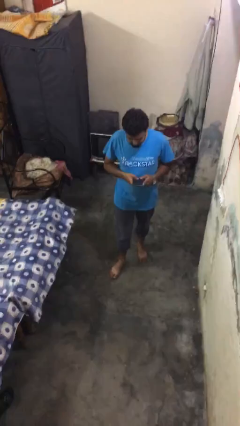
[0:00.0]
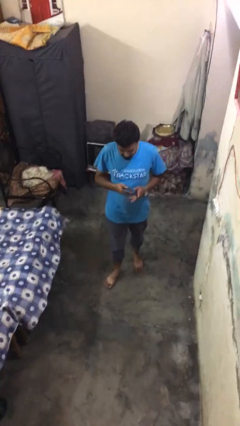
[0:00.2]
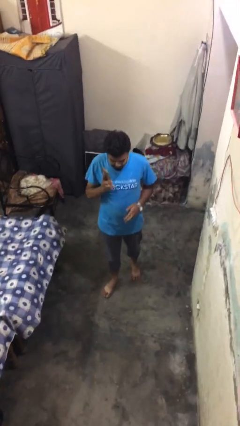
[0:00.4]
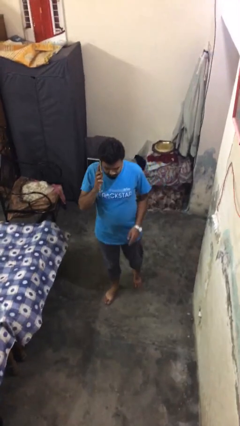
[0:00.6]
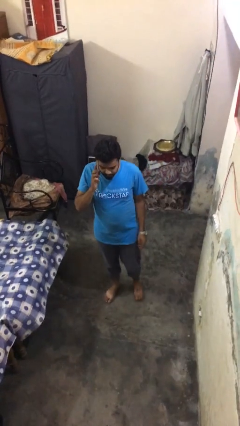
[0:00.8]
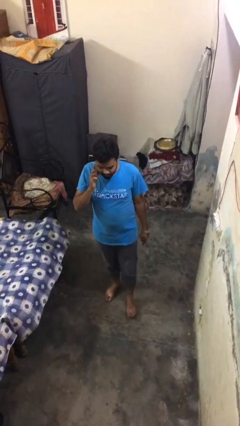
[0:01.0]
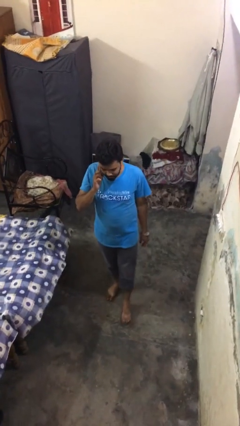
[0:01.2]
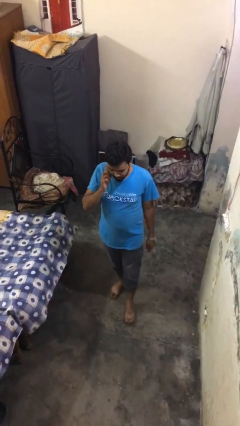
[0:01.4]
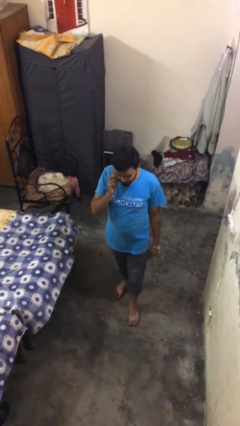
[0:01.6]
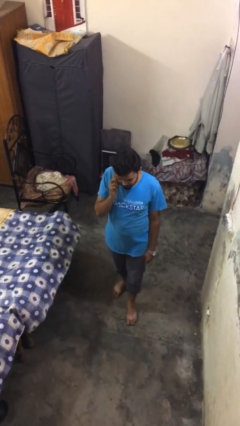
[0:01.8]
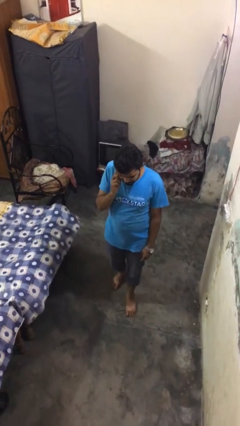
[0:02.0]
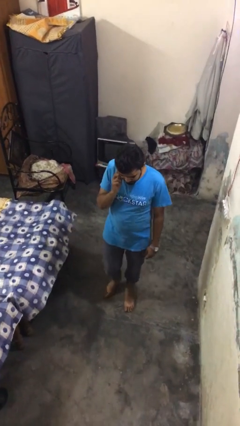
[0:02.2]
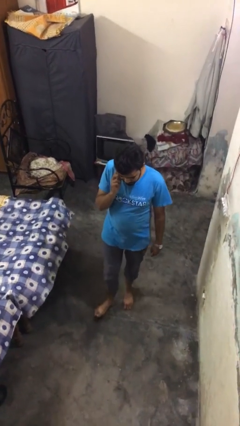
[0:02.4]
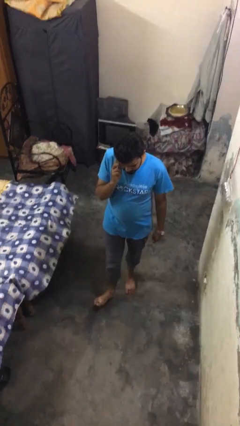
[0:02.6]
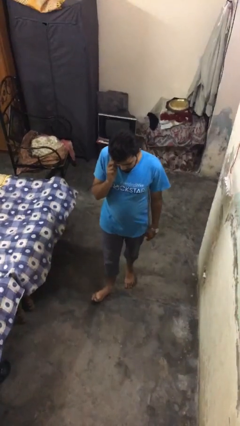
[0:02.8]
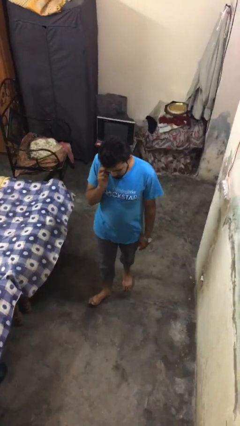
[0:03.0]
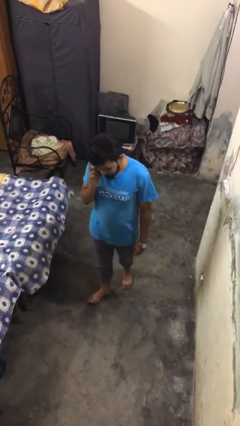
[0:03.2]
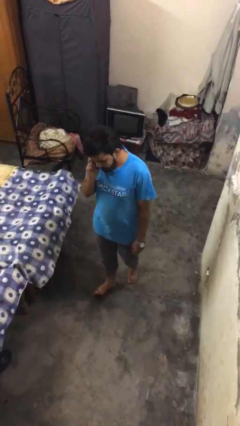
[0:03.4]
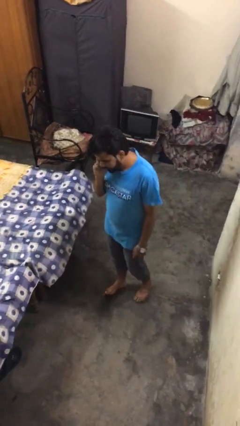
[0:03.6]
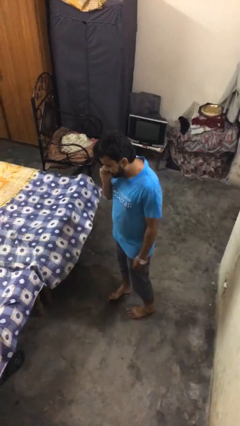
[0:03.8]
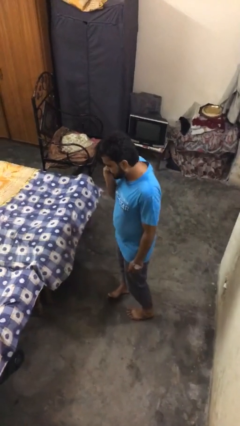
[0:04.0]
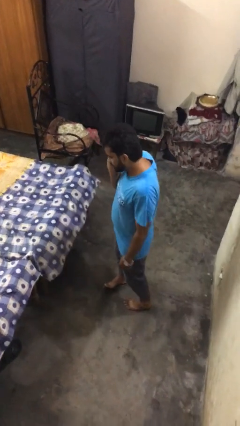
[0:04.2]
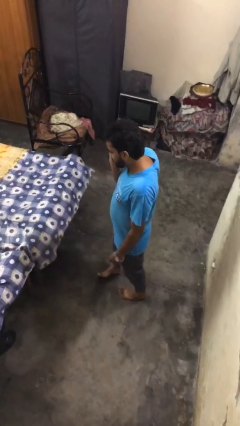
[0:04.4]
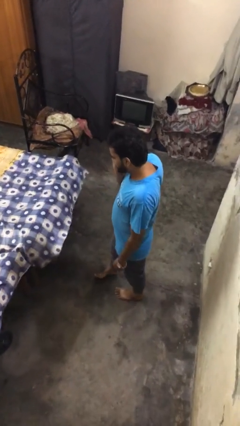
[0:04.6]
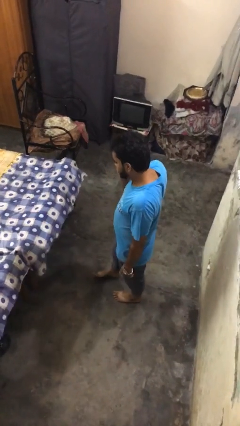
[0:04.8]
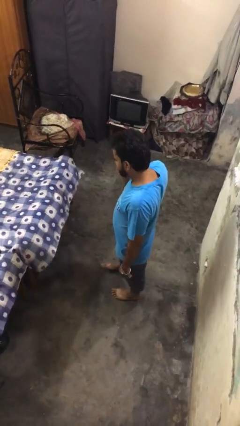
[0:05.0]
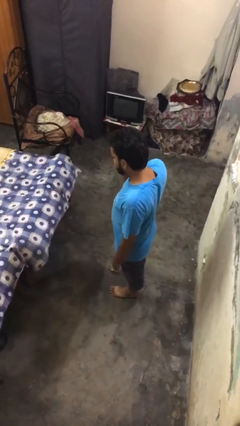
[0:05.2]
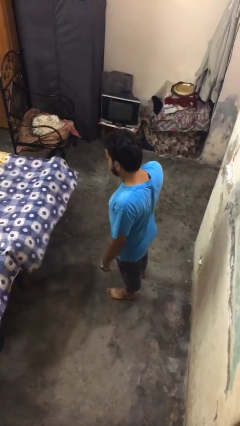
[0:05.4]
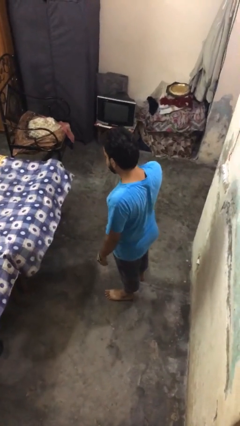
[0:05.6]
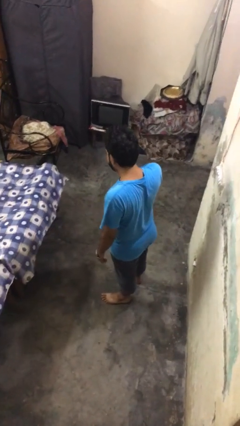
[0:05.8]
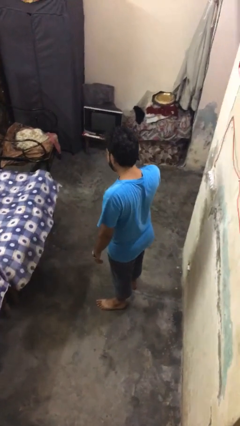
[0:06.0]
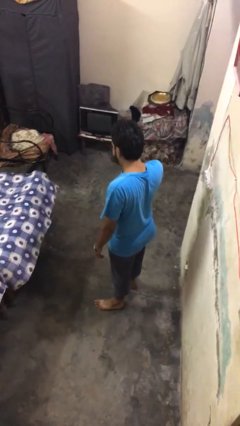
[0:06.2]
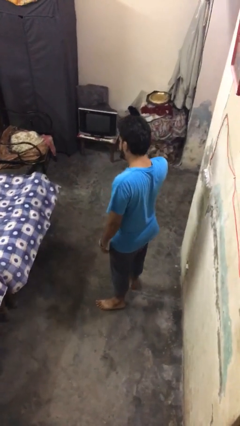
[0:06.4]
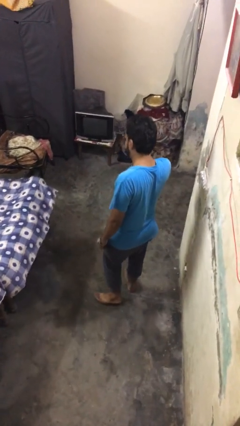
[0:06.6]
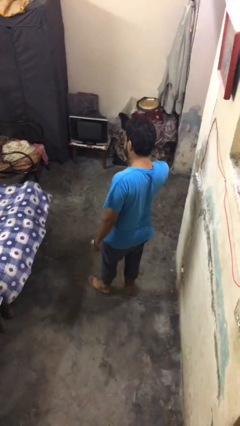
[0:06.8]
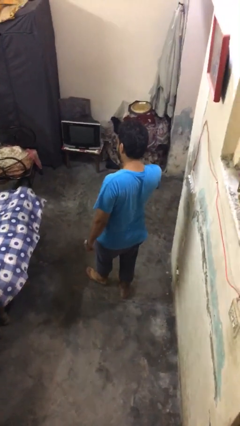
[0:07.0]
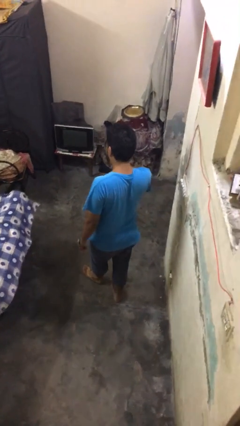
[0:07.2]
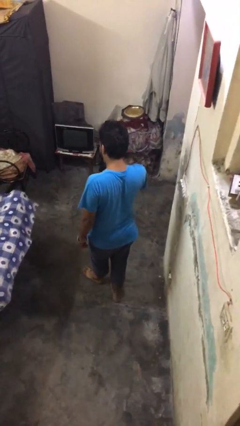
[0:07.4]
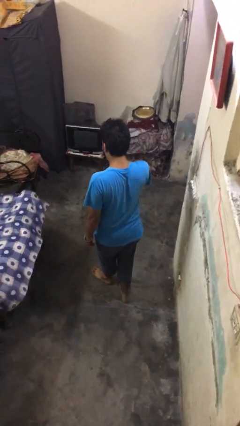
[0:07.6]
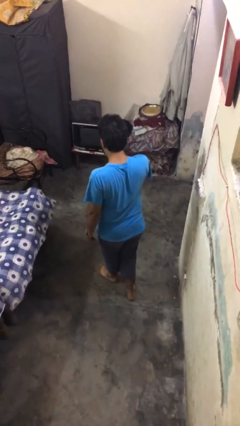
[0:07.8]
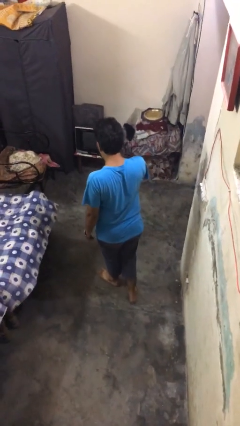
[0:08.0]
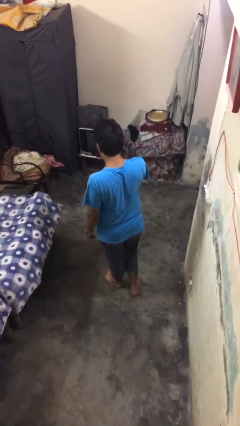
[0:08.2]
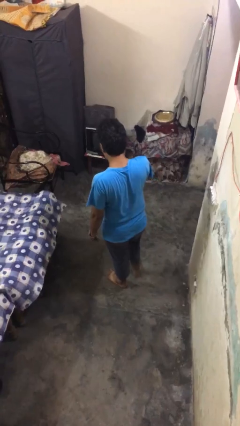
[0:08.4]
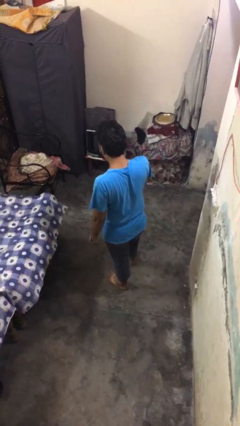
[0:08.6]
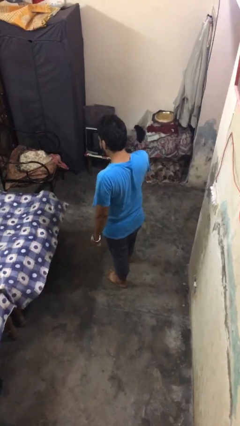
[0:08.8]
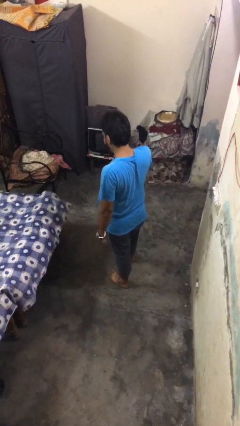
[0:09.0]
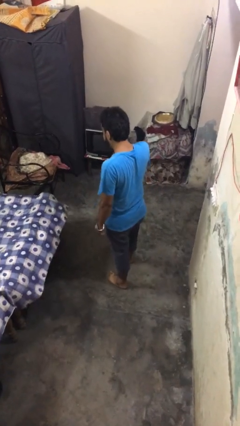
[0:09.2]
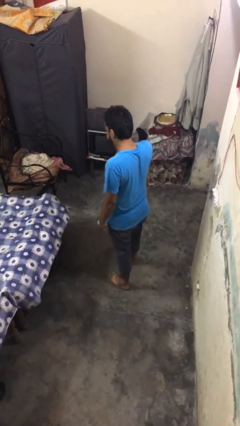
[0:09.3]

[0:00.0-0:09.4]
person talks on phone

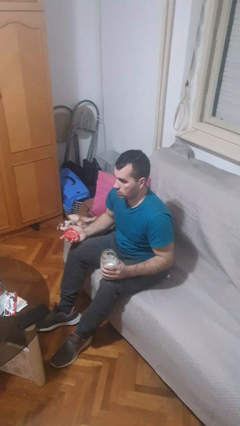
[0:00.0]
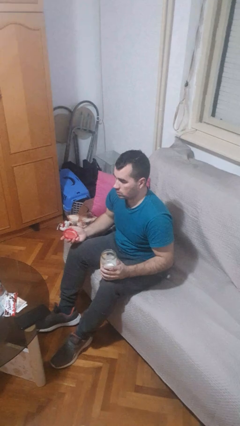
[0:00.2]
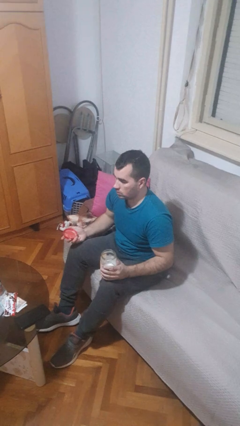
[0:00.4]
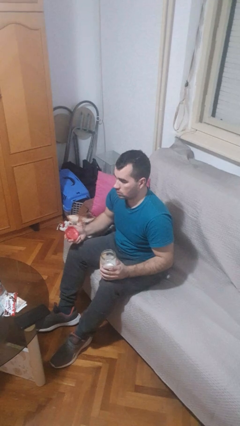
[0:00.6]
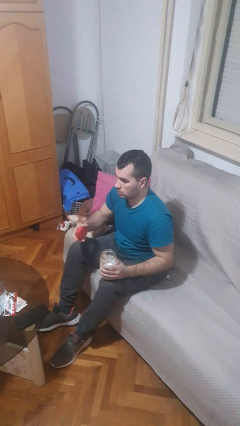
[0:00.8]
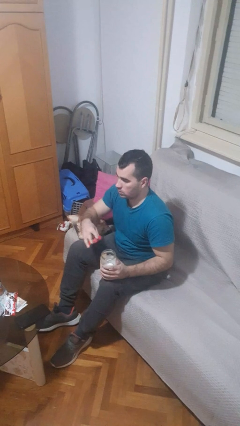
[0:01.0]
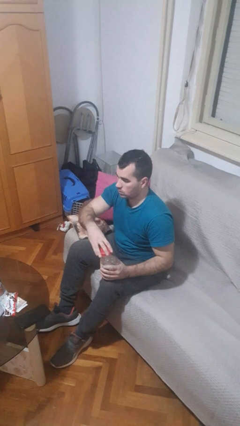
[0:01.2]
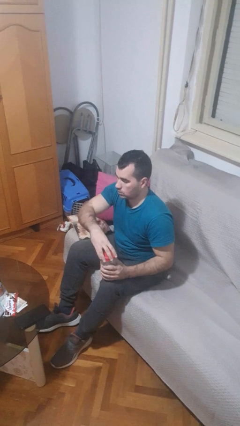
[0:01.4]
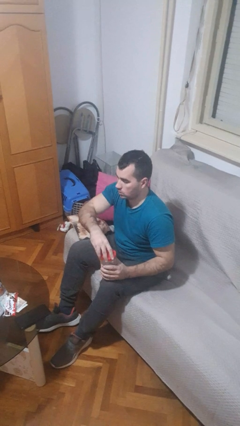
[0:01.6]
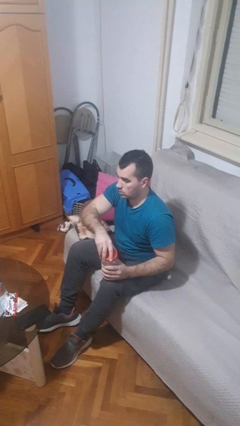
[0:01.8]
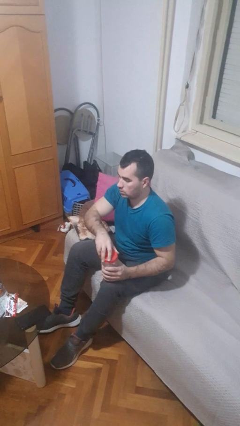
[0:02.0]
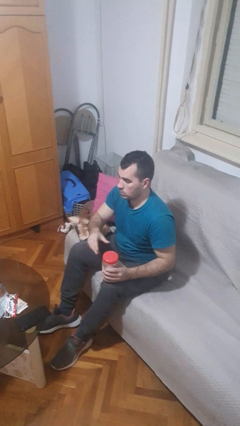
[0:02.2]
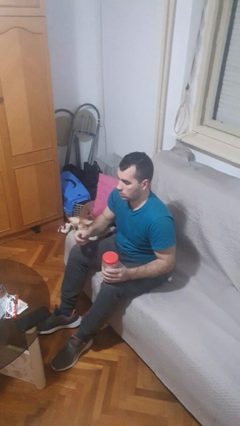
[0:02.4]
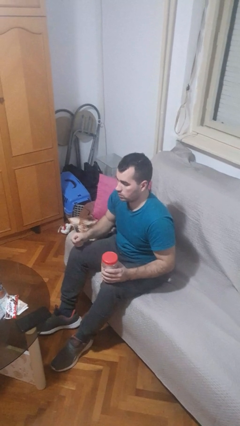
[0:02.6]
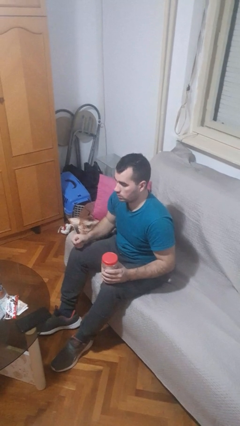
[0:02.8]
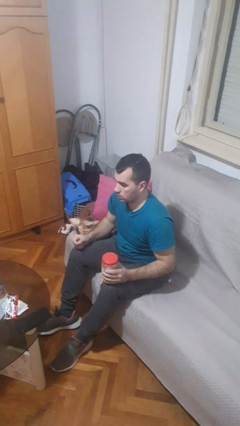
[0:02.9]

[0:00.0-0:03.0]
person closes jar

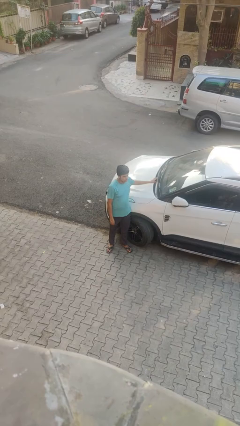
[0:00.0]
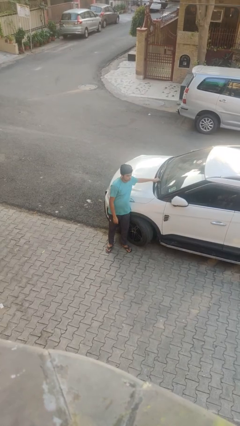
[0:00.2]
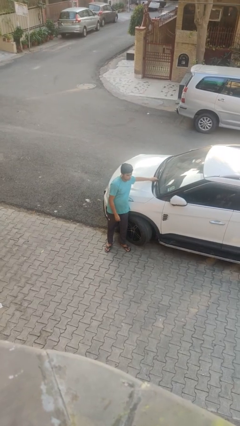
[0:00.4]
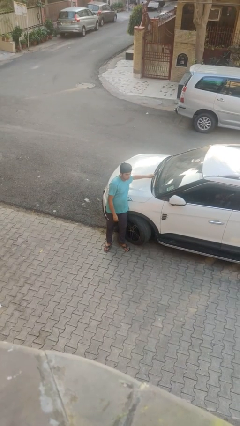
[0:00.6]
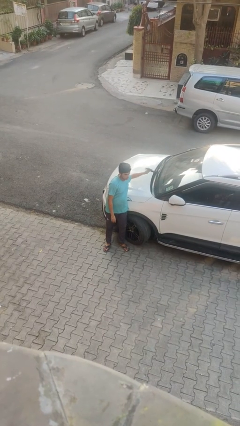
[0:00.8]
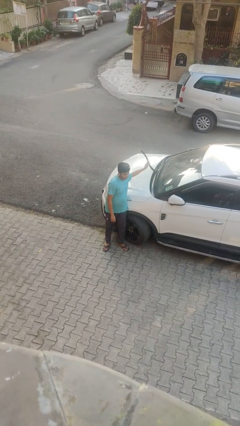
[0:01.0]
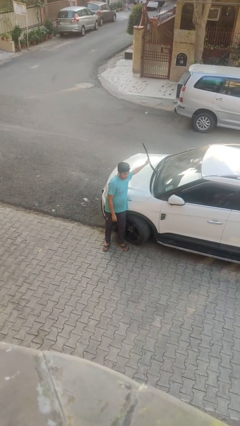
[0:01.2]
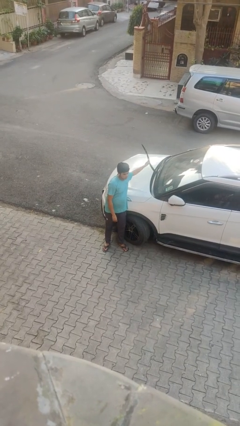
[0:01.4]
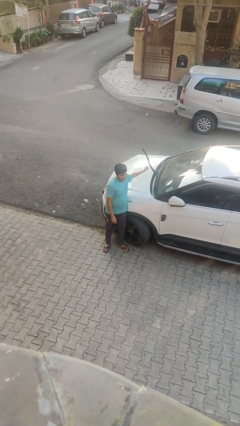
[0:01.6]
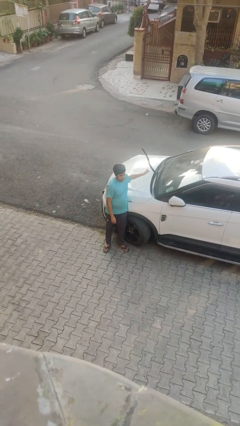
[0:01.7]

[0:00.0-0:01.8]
person flips up car wipers

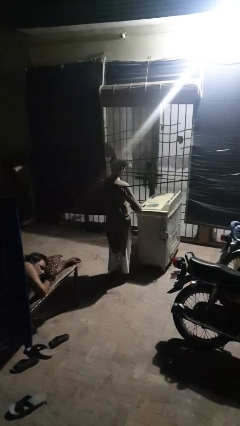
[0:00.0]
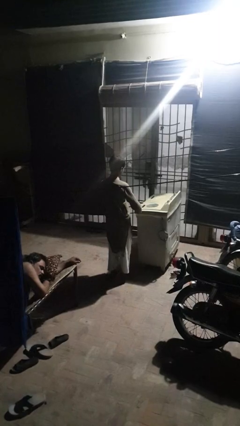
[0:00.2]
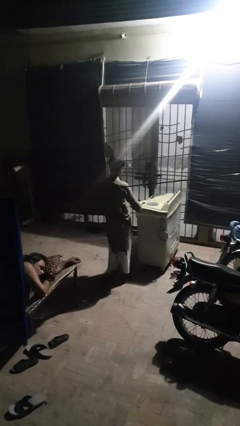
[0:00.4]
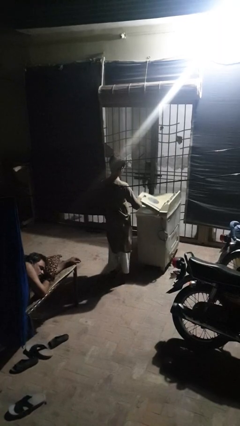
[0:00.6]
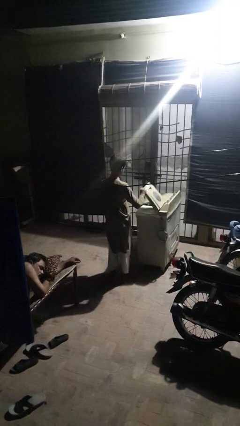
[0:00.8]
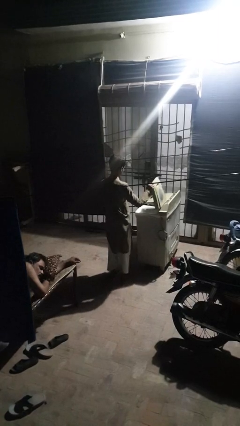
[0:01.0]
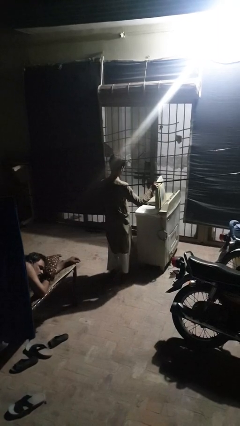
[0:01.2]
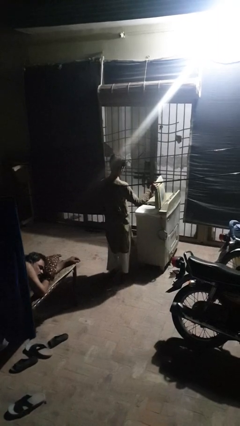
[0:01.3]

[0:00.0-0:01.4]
person opens clothes washer

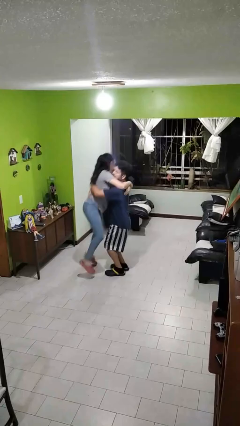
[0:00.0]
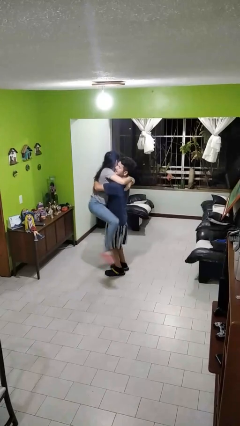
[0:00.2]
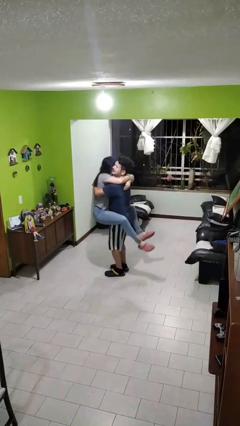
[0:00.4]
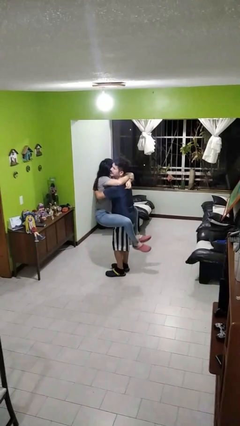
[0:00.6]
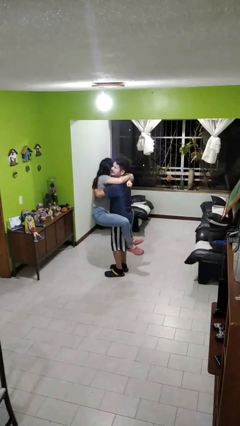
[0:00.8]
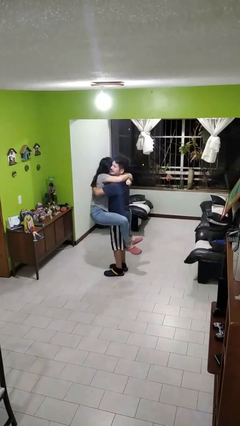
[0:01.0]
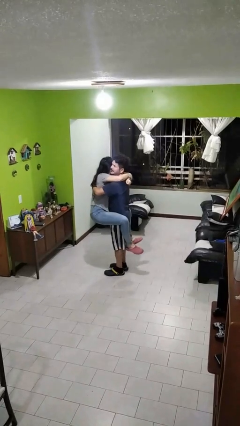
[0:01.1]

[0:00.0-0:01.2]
person picks up person

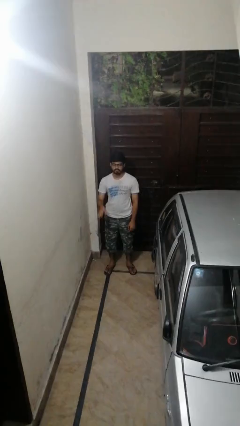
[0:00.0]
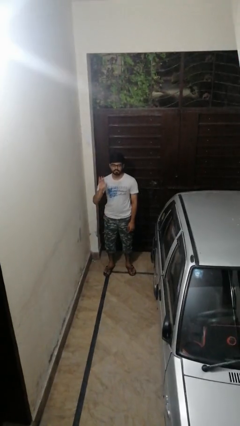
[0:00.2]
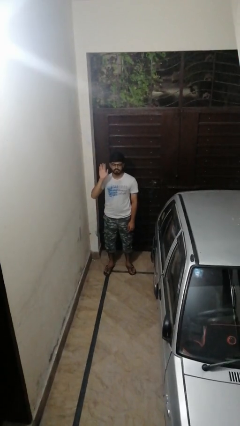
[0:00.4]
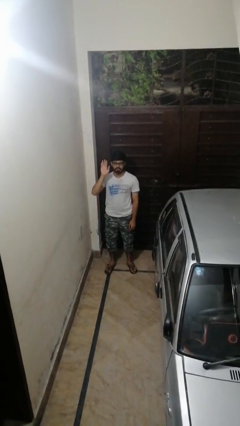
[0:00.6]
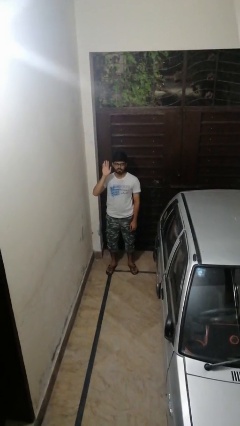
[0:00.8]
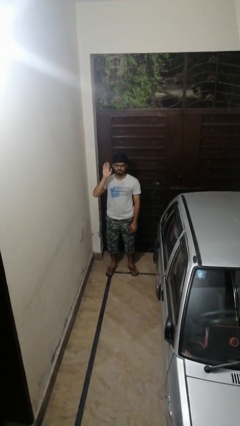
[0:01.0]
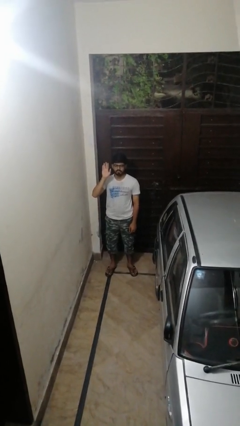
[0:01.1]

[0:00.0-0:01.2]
person gestures raise hand
